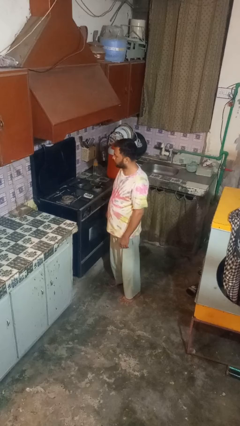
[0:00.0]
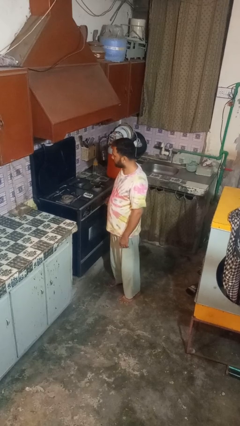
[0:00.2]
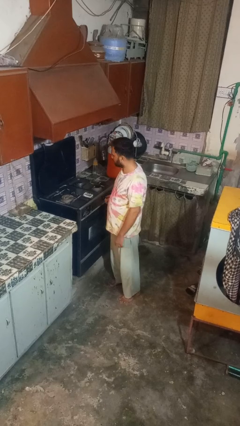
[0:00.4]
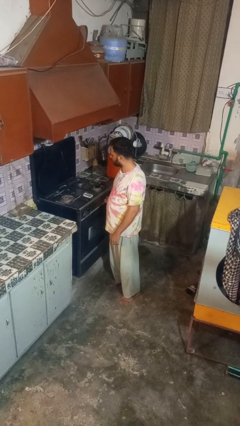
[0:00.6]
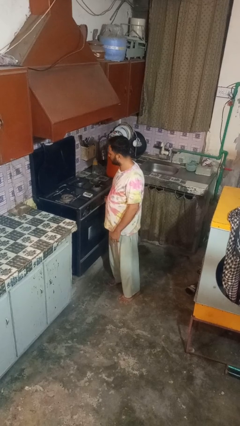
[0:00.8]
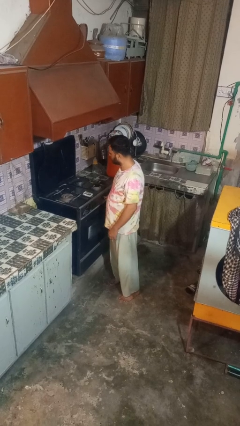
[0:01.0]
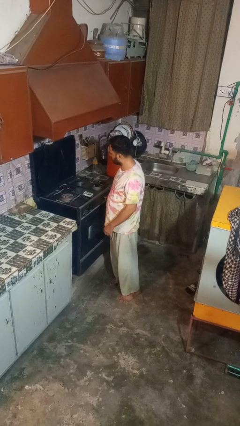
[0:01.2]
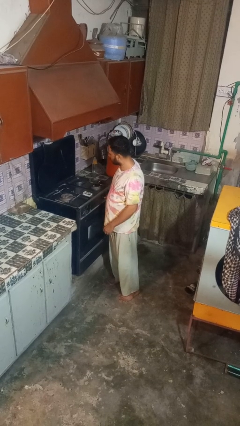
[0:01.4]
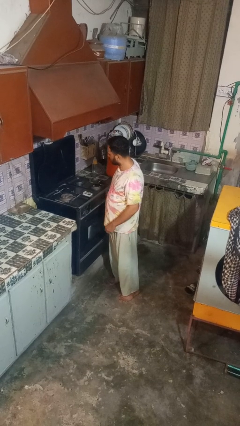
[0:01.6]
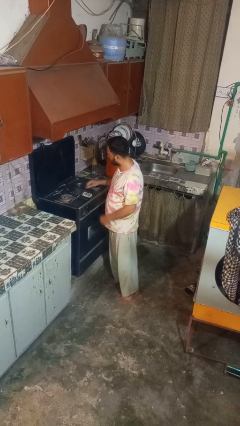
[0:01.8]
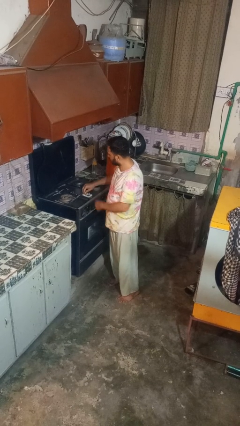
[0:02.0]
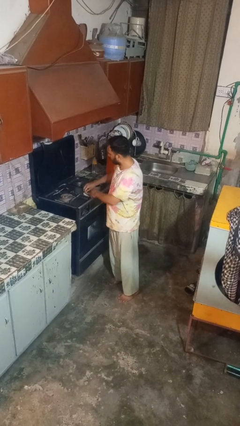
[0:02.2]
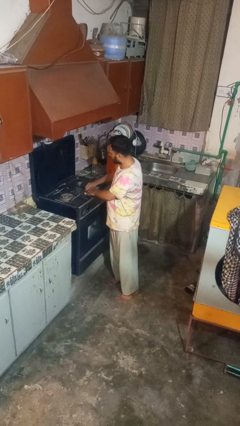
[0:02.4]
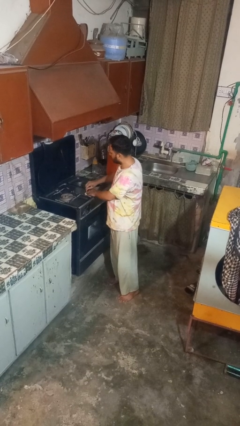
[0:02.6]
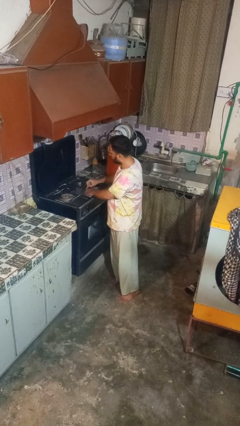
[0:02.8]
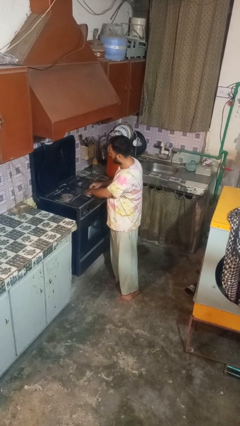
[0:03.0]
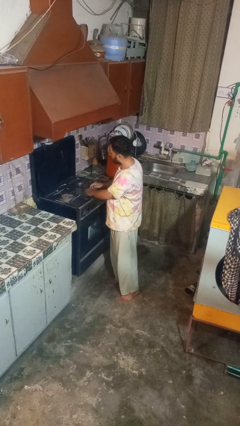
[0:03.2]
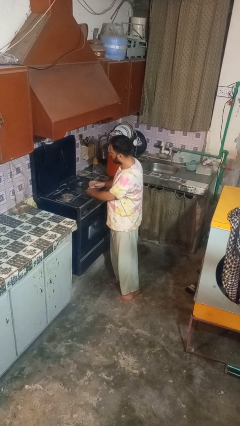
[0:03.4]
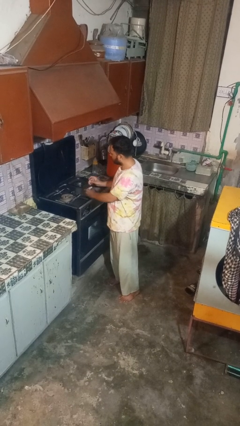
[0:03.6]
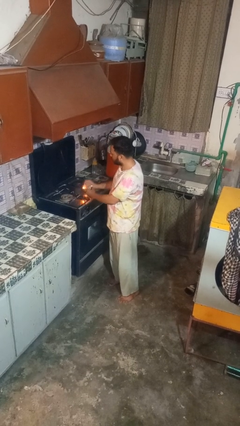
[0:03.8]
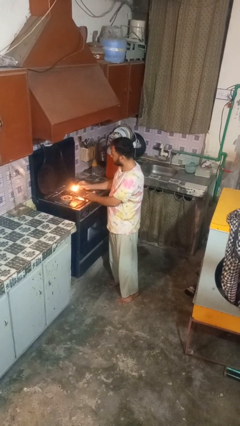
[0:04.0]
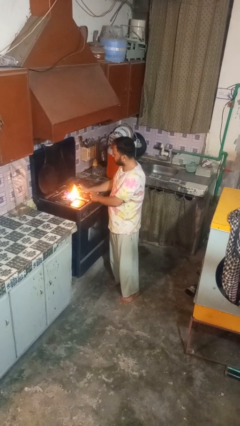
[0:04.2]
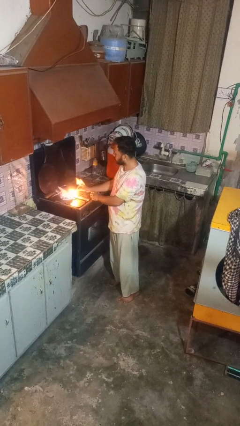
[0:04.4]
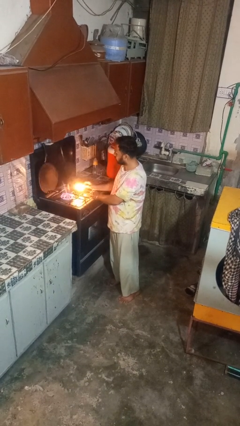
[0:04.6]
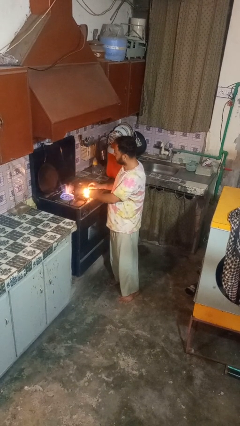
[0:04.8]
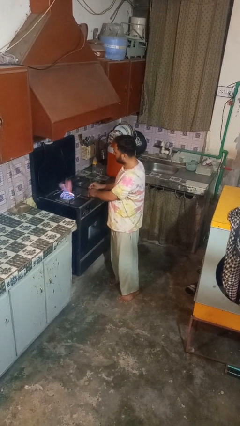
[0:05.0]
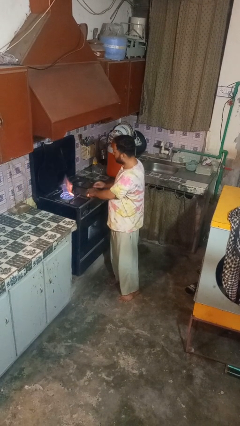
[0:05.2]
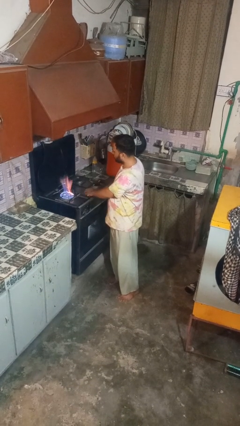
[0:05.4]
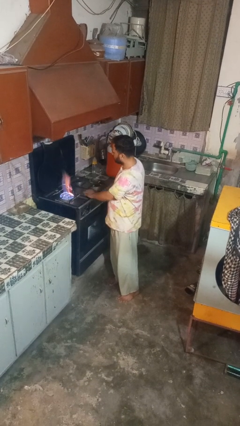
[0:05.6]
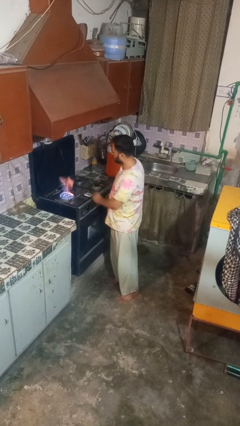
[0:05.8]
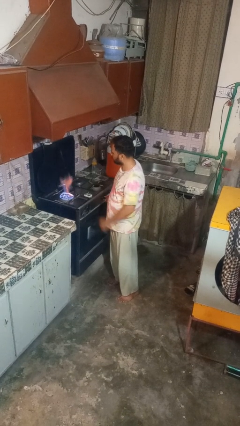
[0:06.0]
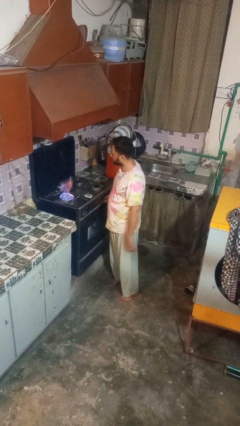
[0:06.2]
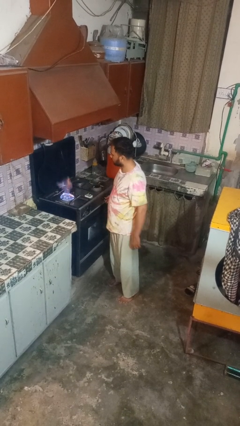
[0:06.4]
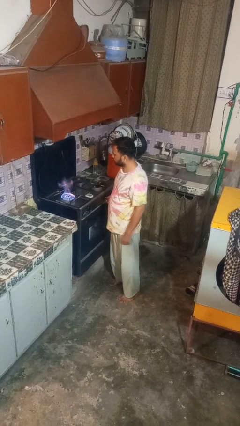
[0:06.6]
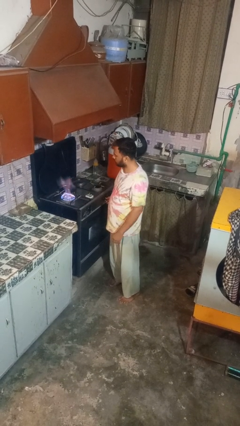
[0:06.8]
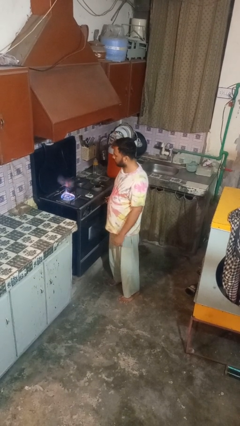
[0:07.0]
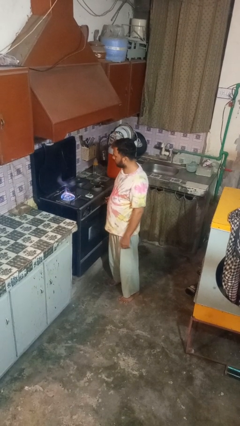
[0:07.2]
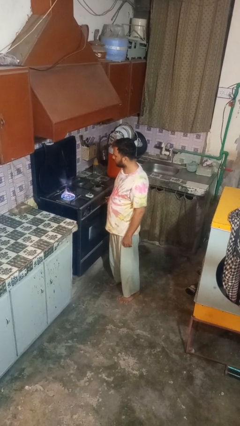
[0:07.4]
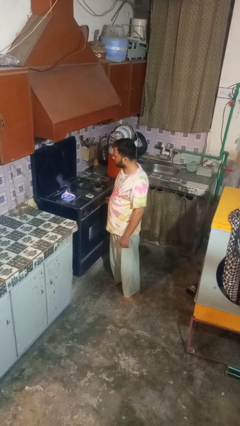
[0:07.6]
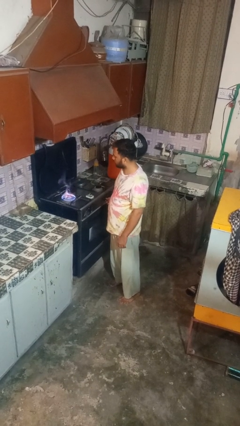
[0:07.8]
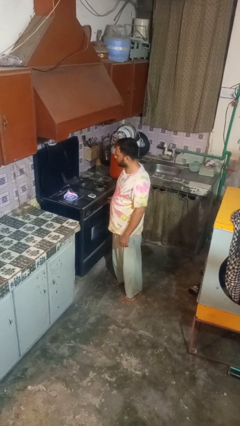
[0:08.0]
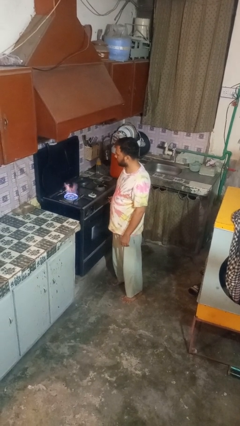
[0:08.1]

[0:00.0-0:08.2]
person turns on stovetop

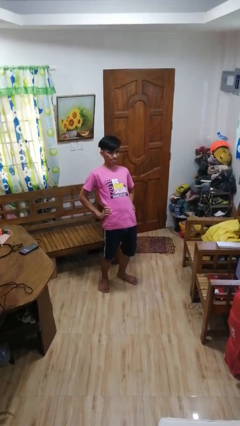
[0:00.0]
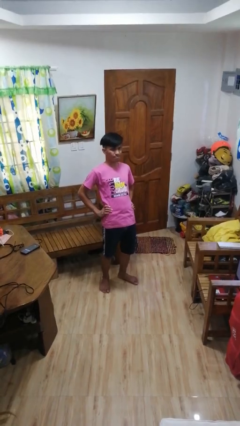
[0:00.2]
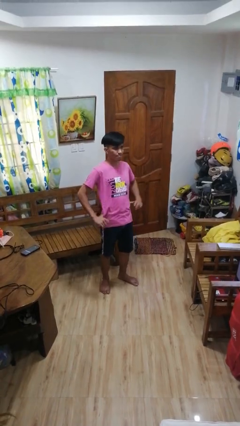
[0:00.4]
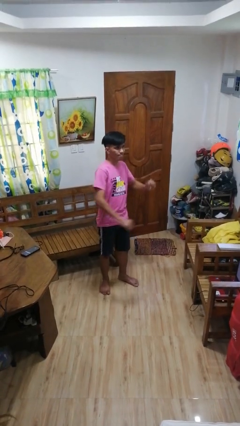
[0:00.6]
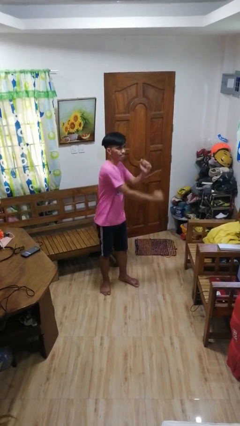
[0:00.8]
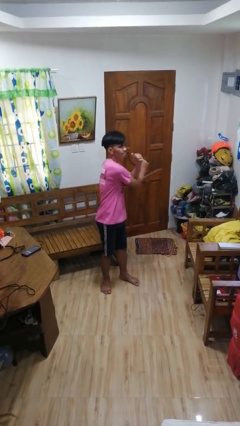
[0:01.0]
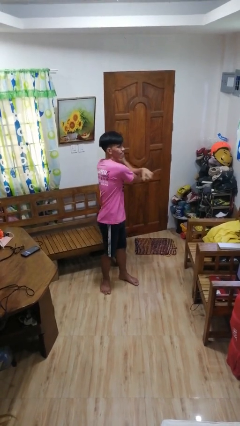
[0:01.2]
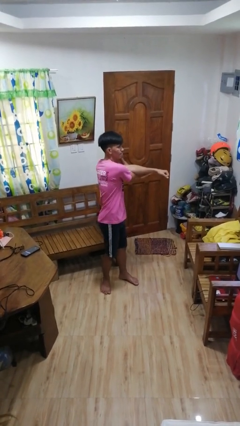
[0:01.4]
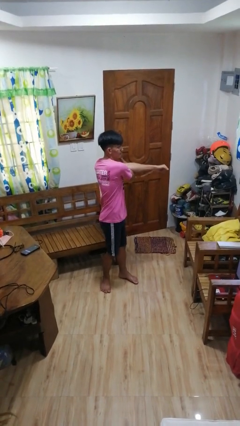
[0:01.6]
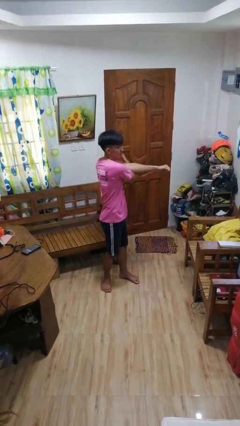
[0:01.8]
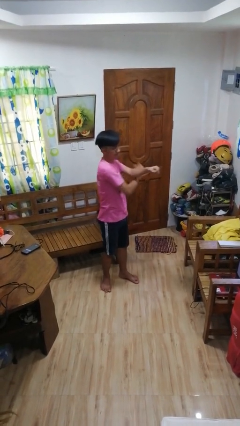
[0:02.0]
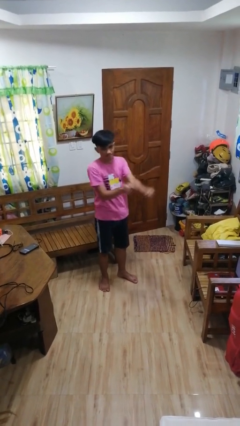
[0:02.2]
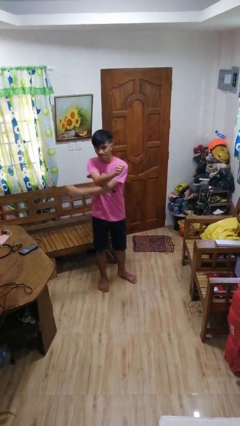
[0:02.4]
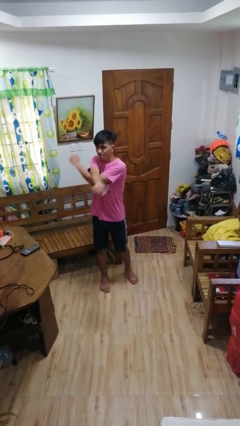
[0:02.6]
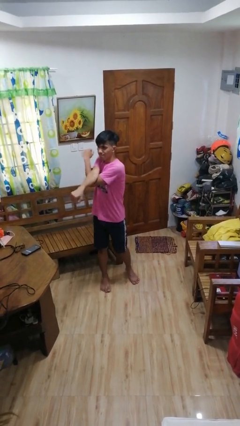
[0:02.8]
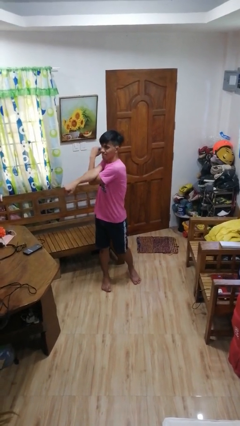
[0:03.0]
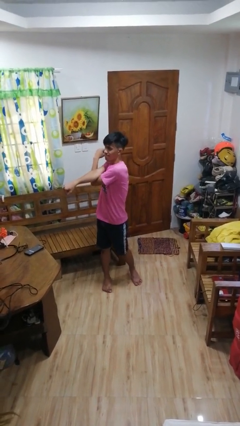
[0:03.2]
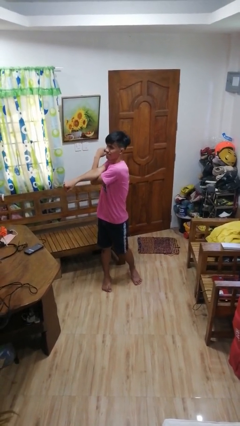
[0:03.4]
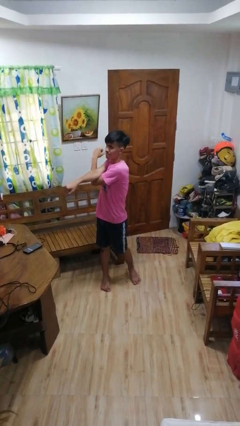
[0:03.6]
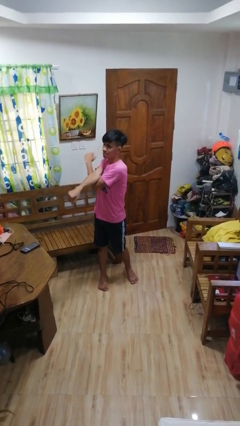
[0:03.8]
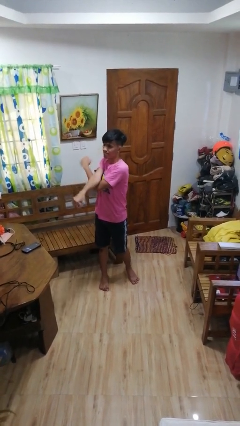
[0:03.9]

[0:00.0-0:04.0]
person stretches arms to side

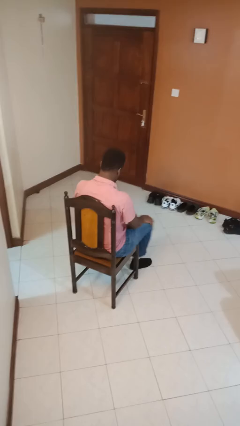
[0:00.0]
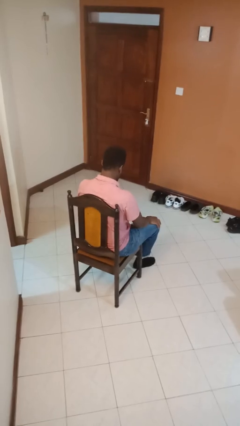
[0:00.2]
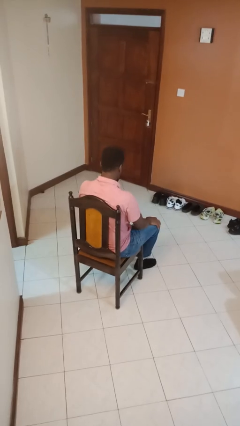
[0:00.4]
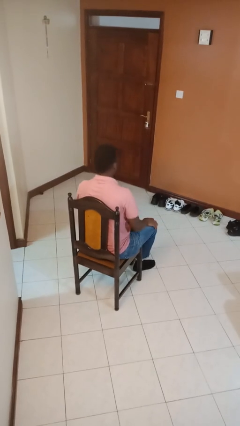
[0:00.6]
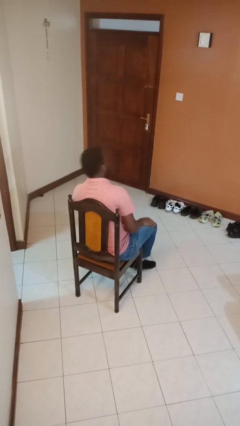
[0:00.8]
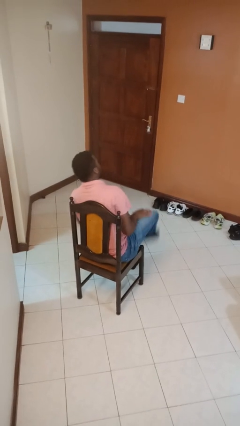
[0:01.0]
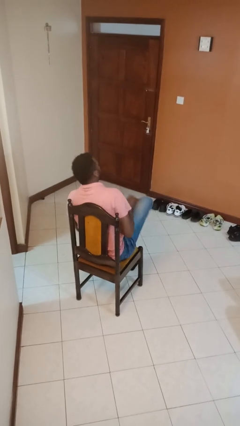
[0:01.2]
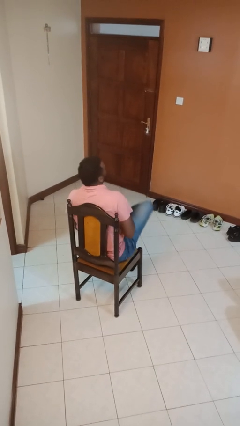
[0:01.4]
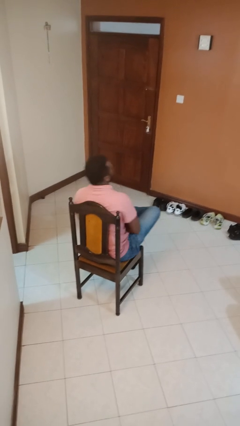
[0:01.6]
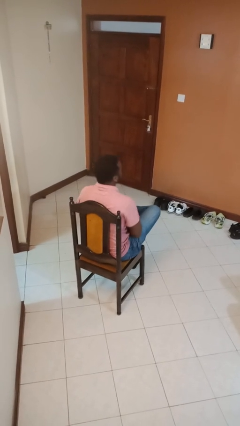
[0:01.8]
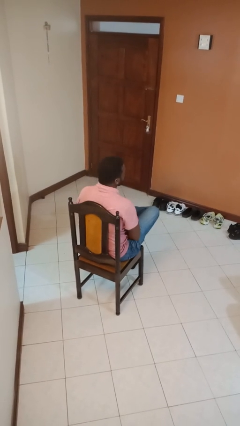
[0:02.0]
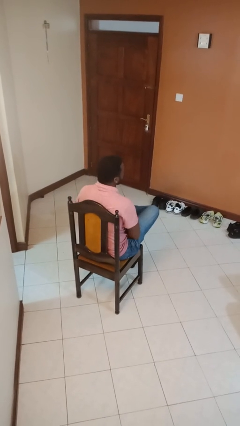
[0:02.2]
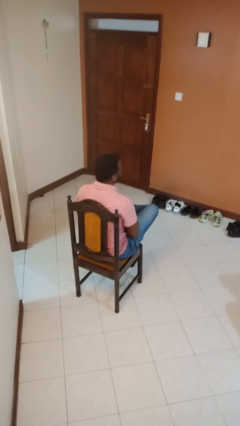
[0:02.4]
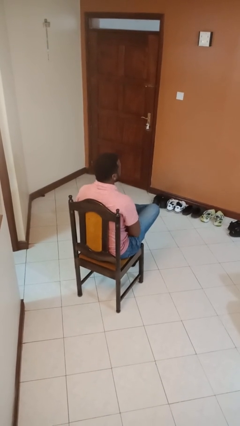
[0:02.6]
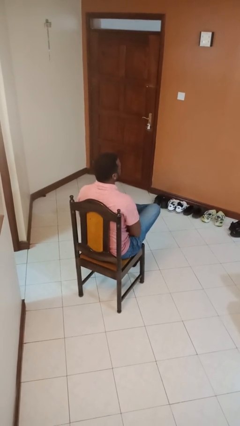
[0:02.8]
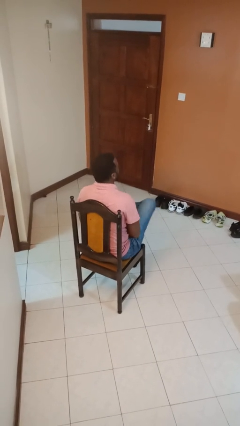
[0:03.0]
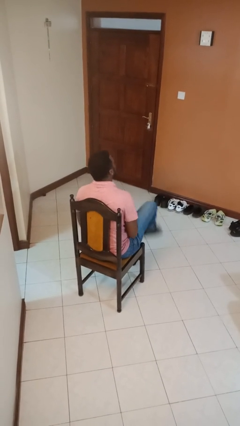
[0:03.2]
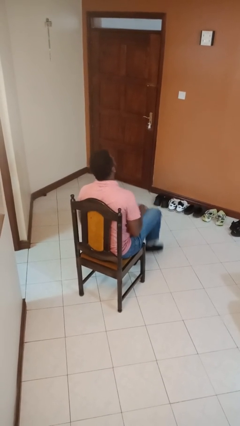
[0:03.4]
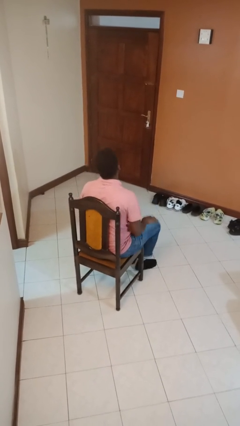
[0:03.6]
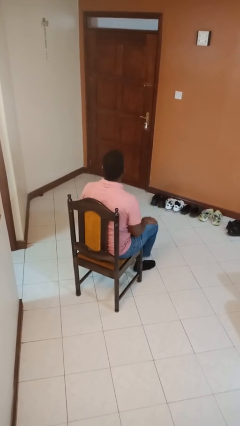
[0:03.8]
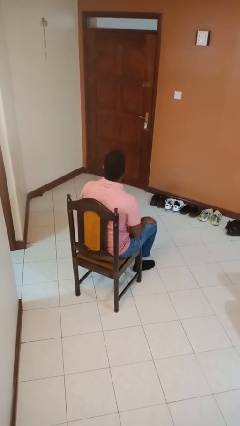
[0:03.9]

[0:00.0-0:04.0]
person crosses legs

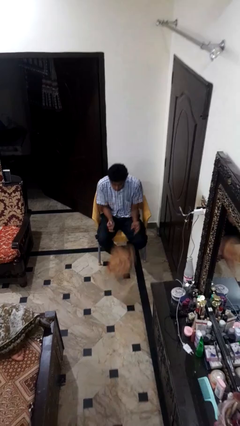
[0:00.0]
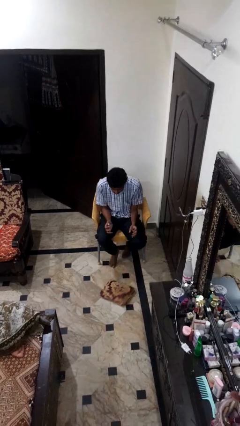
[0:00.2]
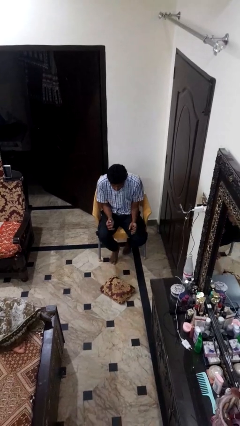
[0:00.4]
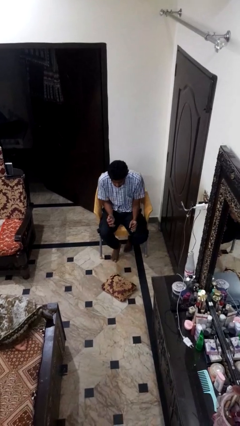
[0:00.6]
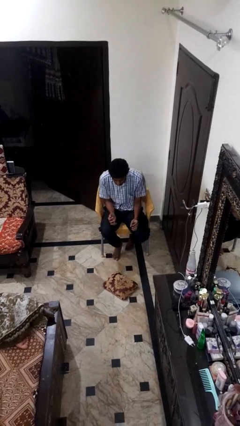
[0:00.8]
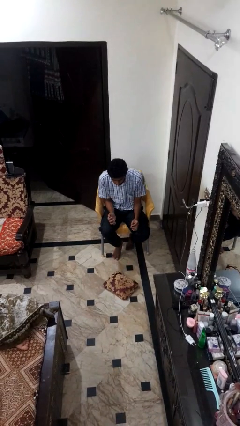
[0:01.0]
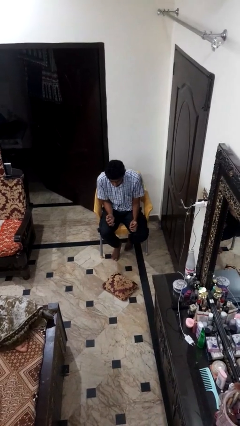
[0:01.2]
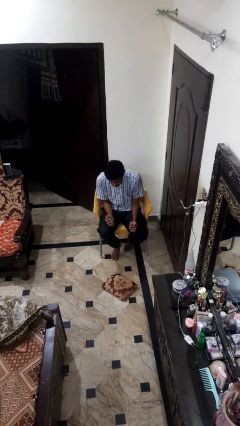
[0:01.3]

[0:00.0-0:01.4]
person drops object

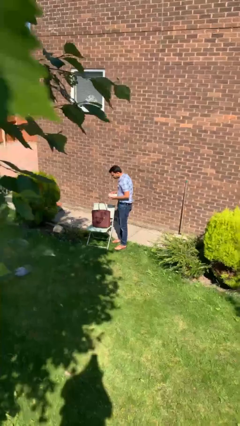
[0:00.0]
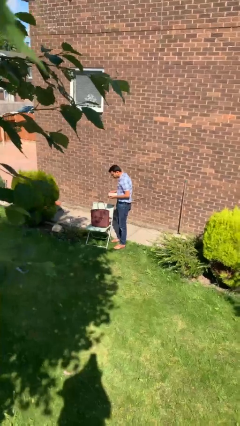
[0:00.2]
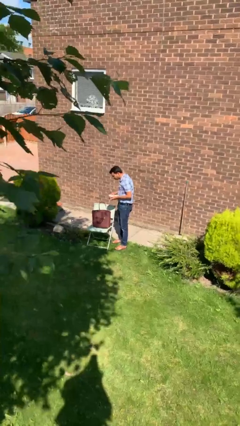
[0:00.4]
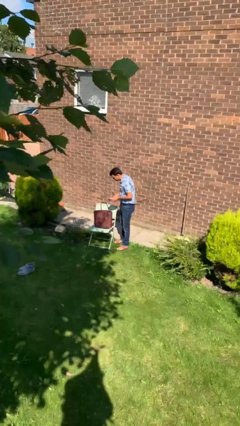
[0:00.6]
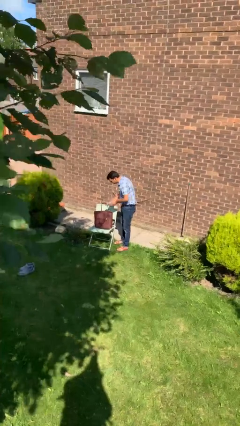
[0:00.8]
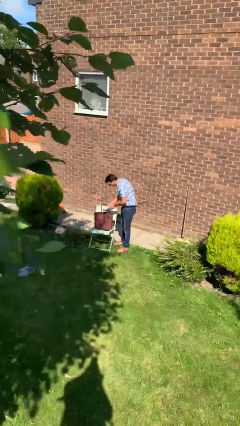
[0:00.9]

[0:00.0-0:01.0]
person puts object into purse
